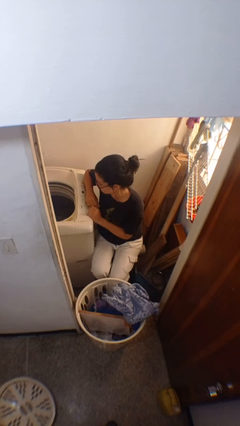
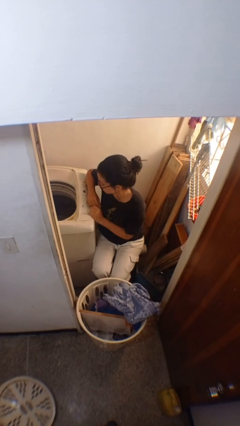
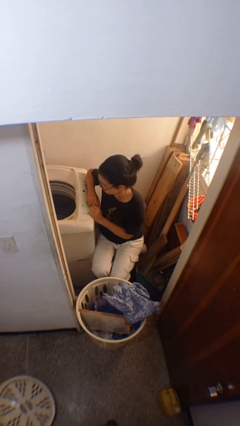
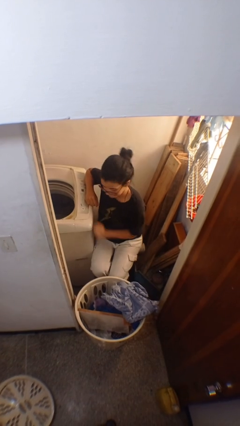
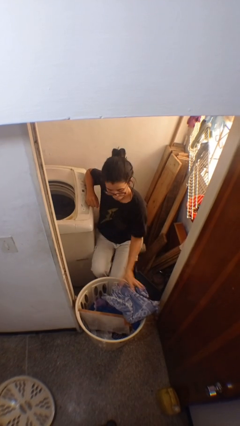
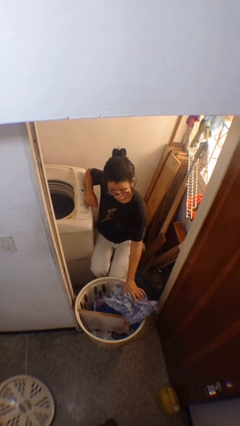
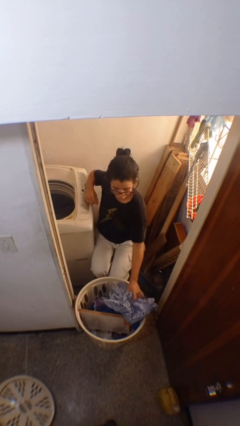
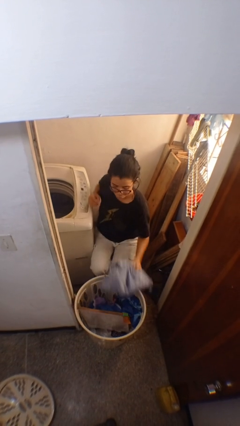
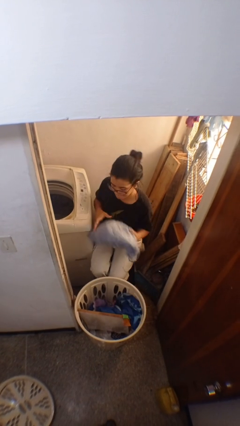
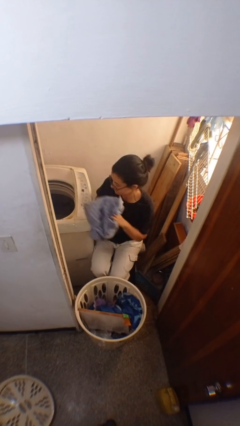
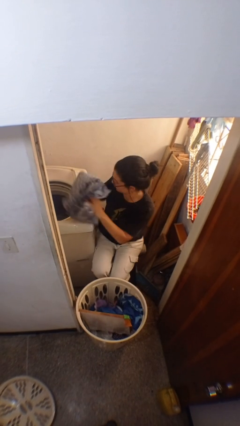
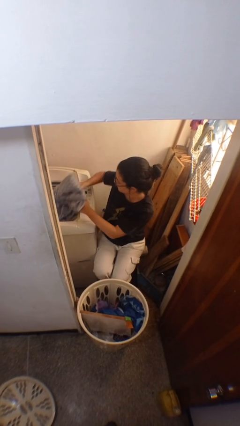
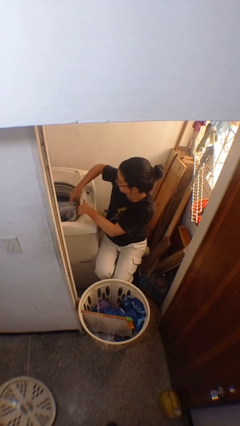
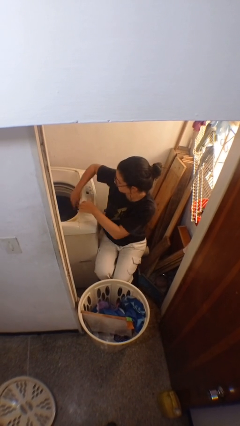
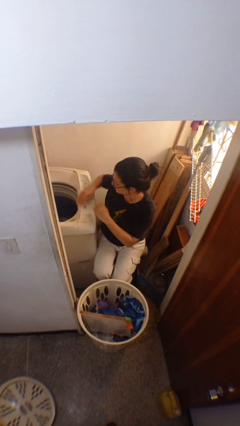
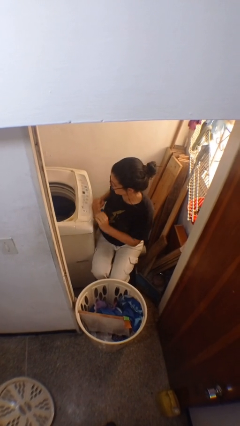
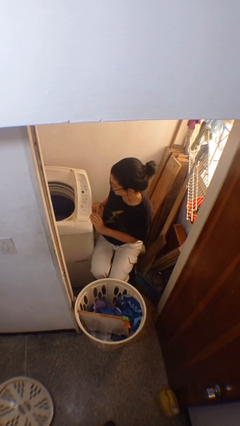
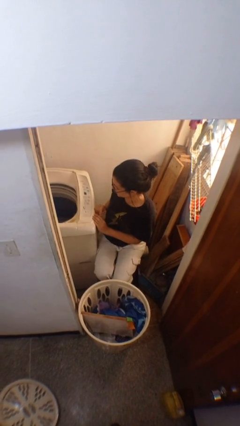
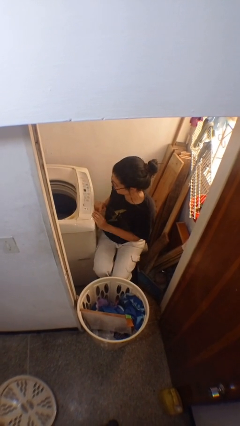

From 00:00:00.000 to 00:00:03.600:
person loads clotheswasher

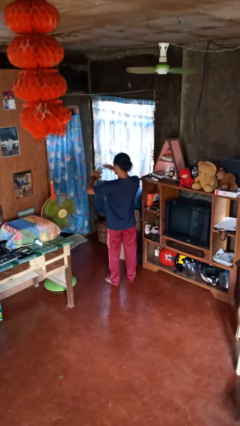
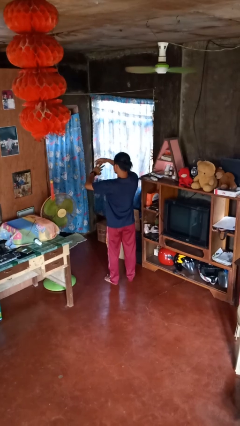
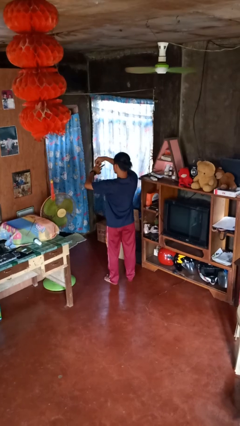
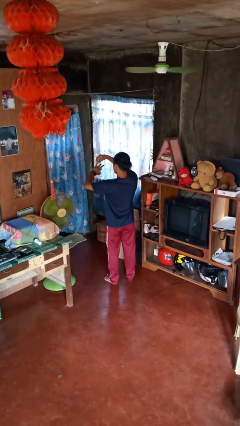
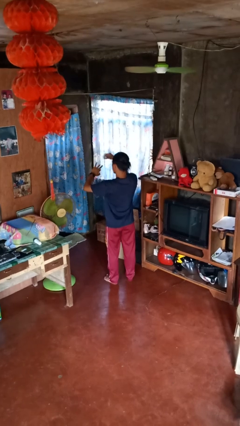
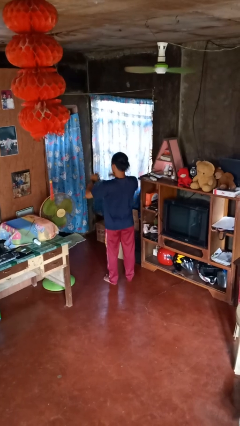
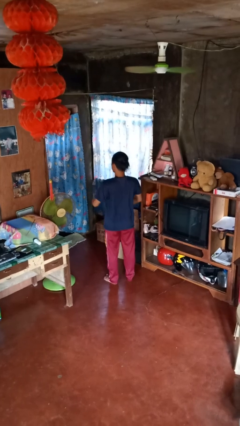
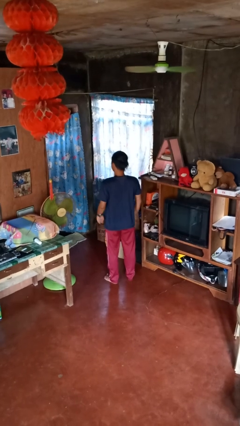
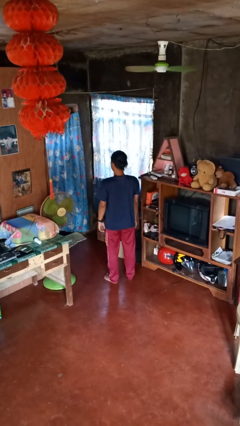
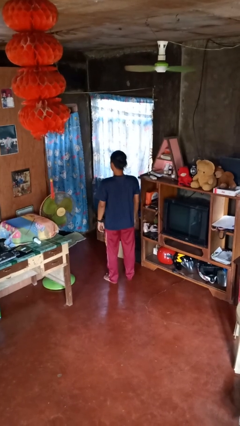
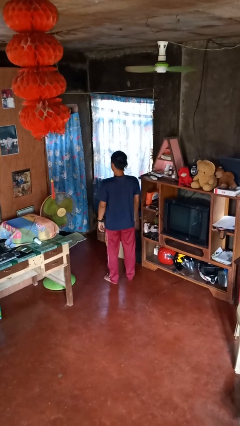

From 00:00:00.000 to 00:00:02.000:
person takes off ring

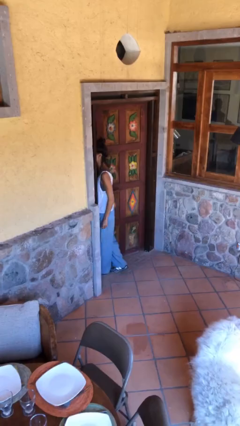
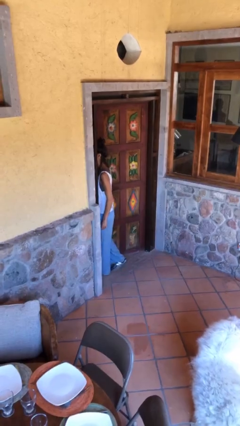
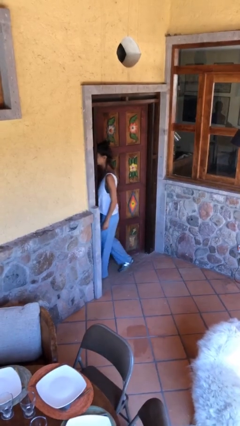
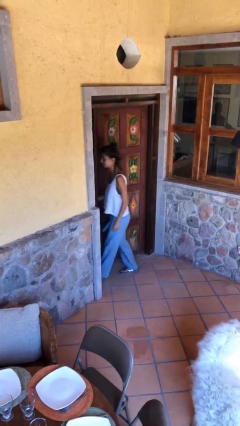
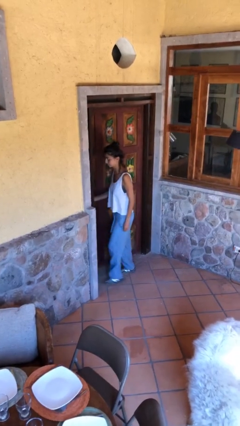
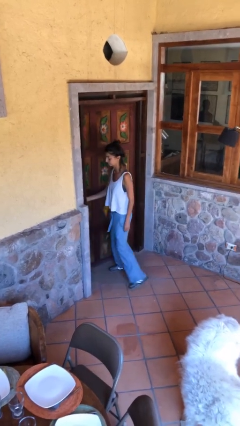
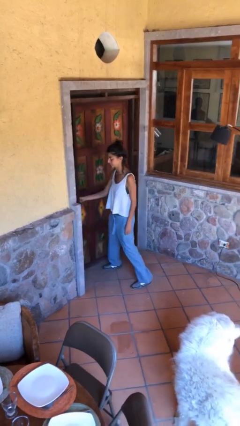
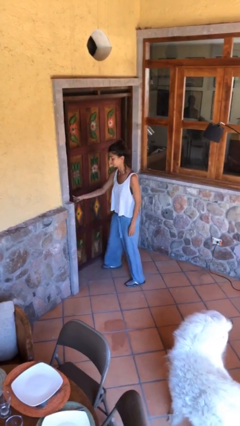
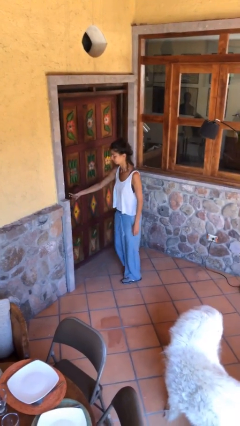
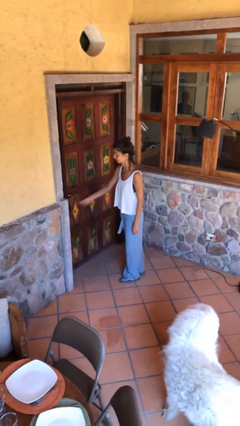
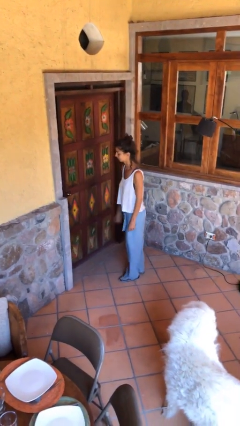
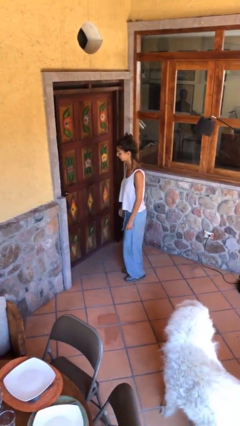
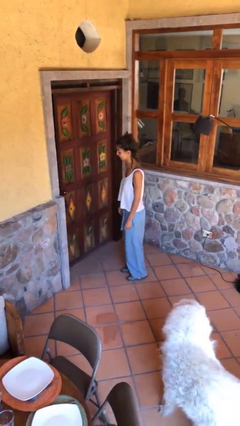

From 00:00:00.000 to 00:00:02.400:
person closes facility door

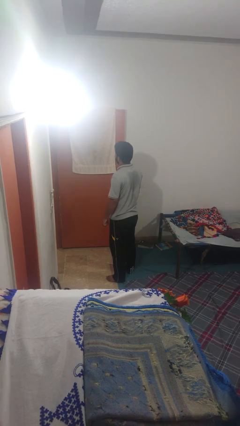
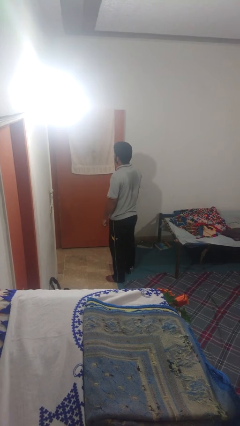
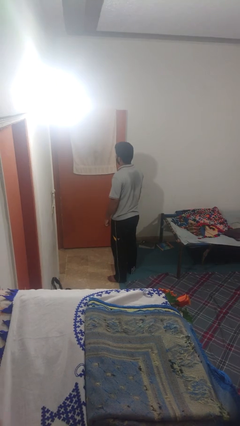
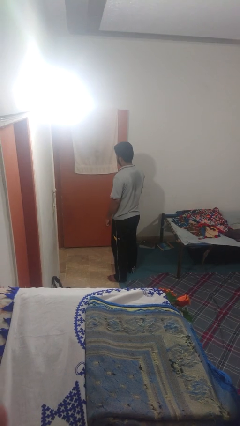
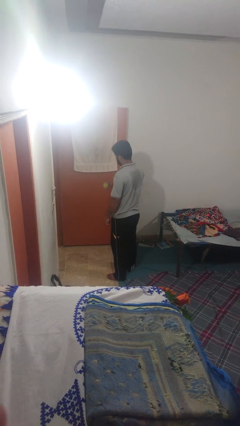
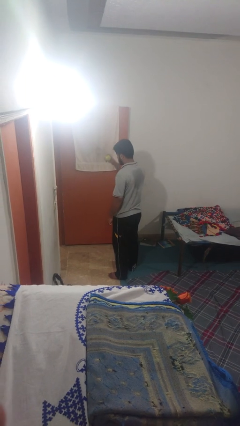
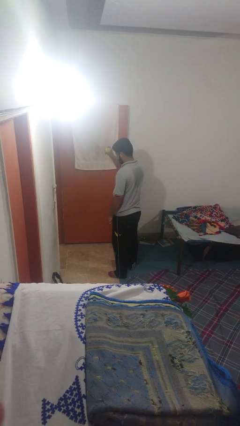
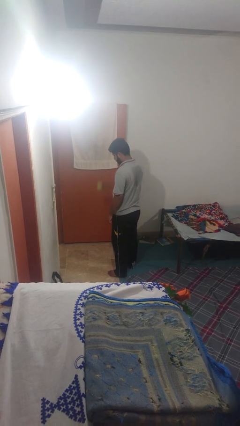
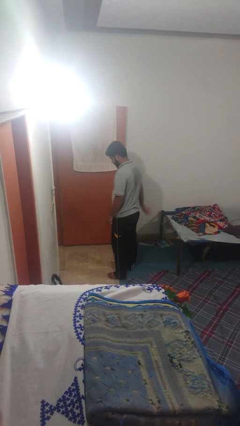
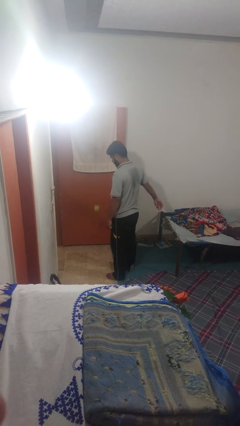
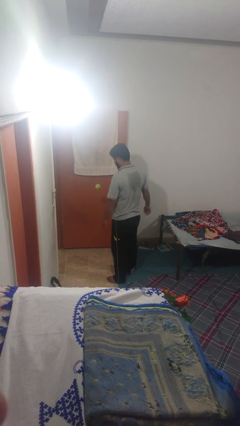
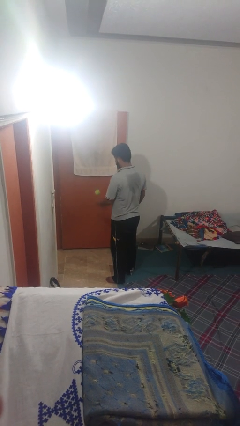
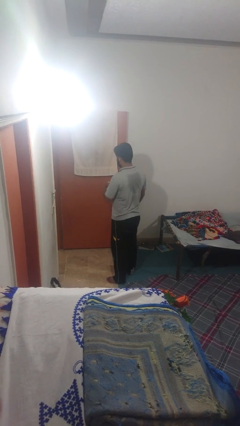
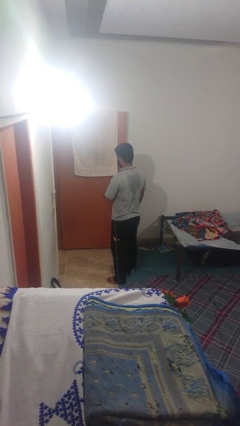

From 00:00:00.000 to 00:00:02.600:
person bounces ball on floor

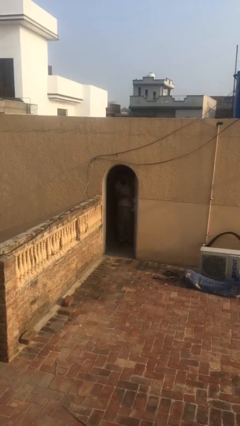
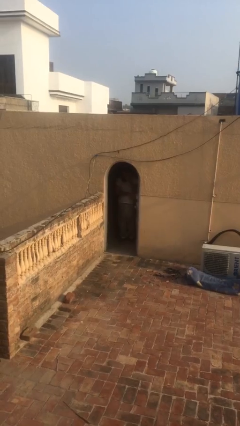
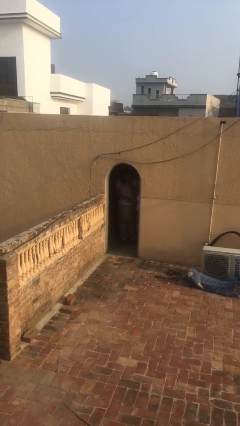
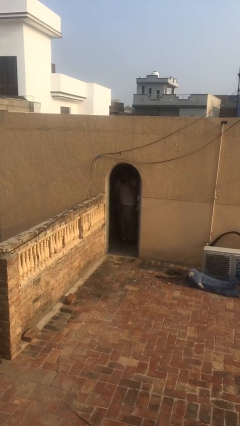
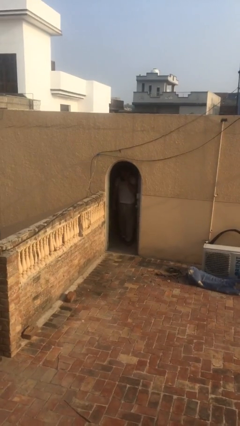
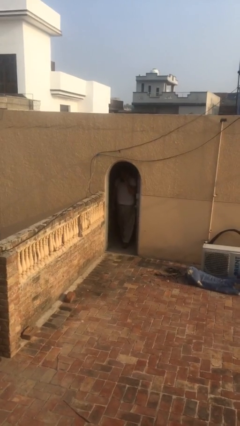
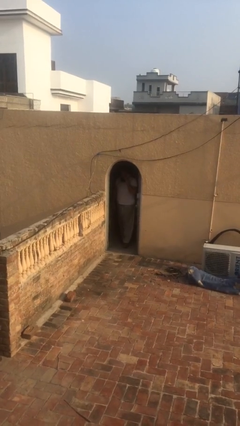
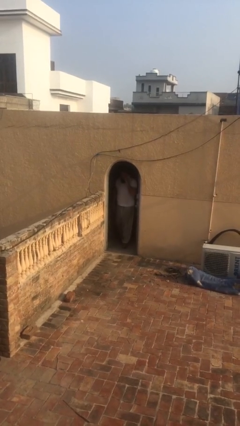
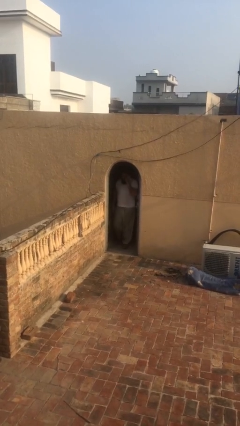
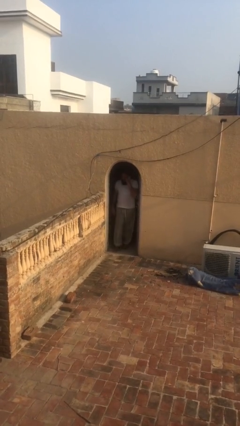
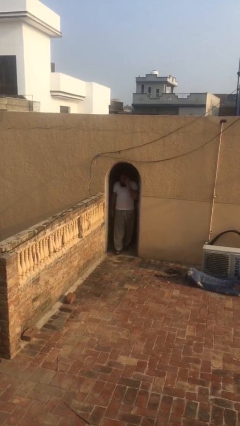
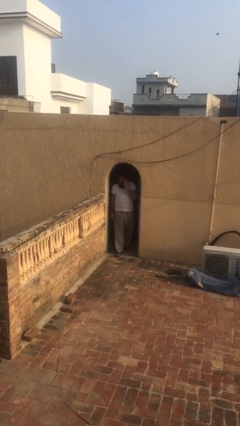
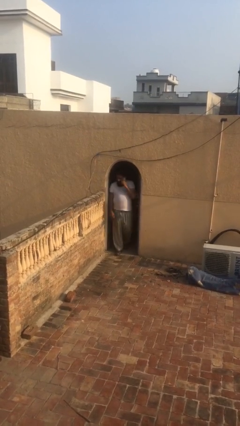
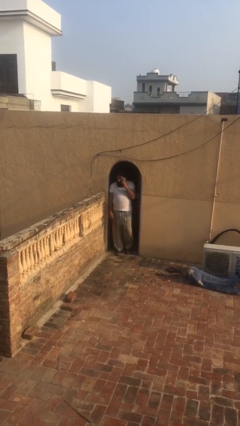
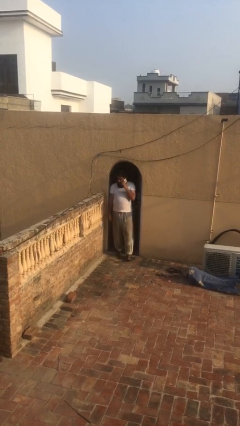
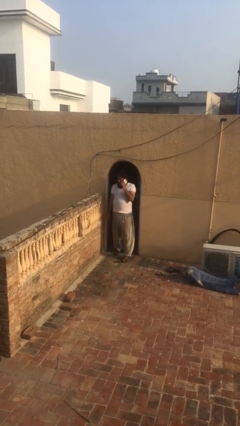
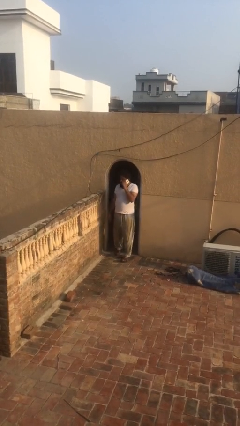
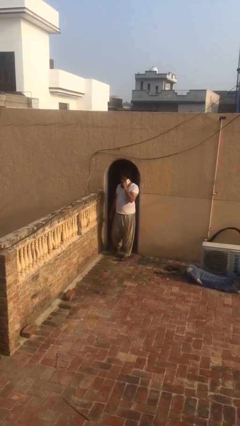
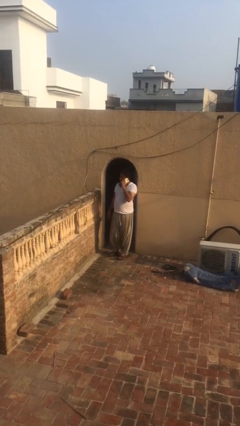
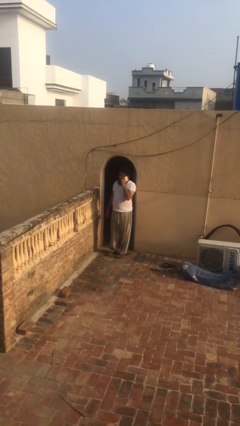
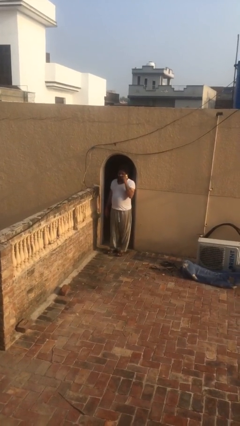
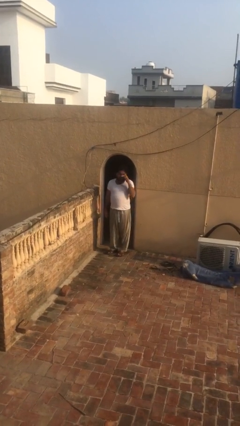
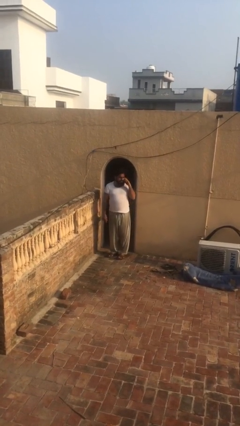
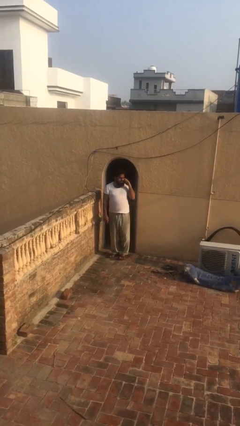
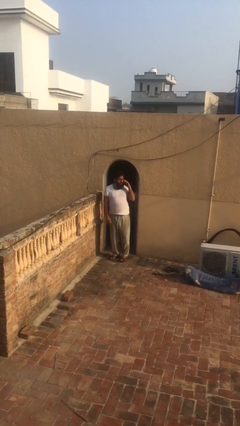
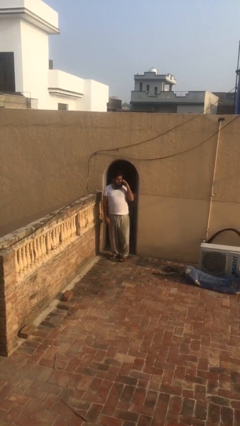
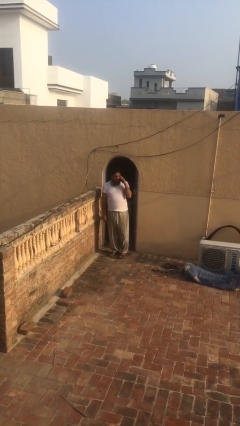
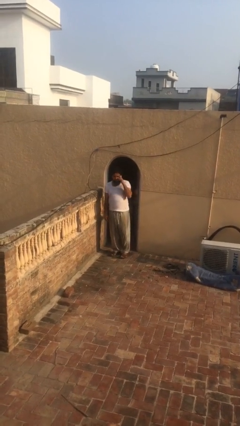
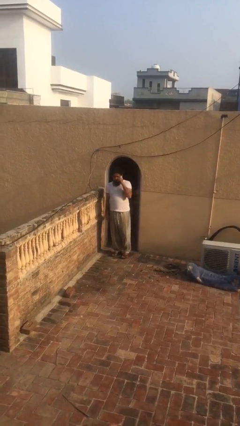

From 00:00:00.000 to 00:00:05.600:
person enters scene through structure

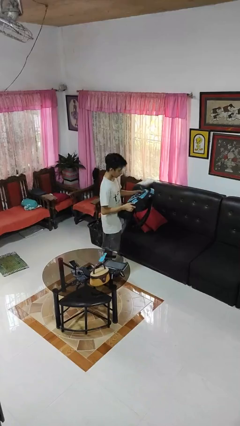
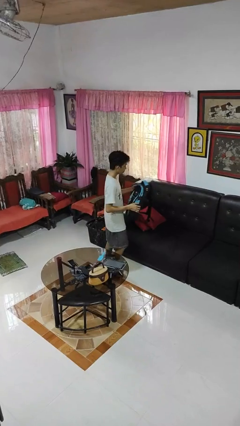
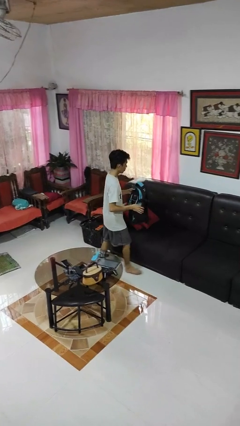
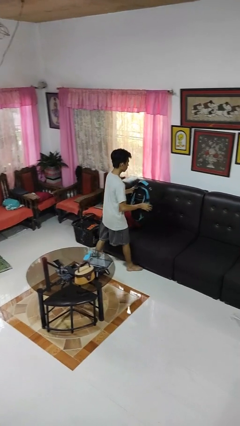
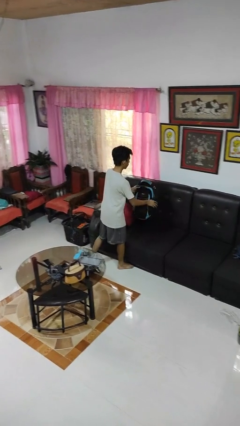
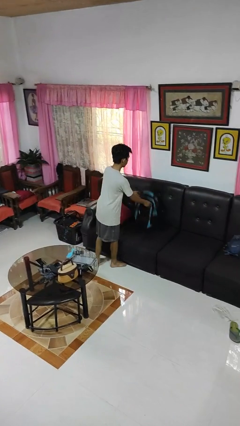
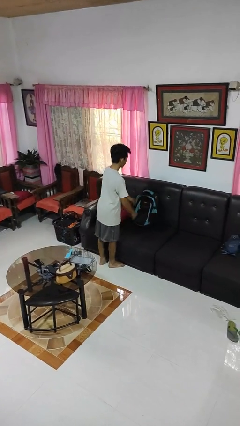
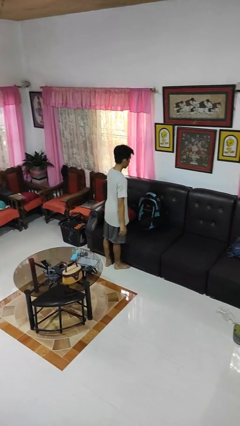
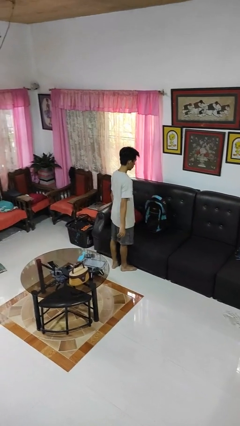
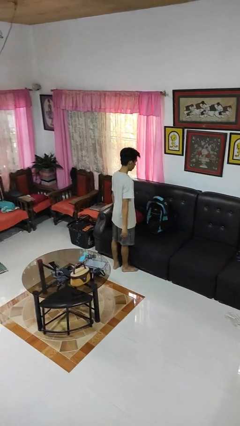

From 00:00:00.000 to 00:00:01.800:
person puts down object on couch
